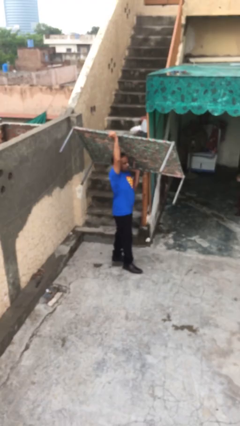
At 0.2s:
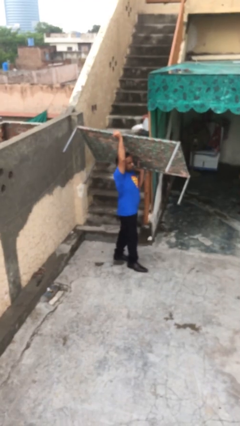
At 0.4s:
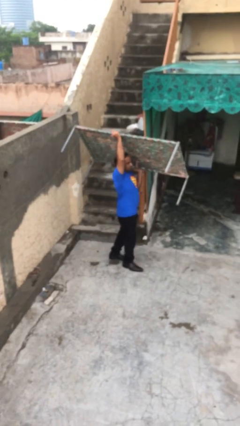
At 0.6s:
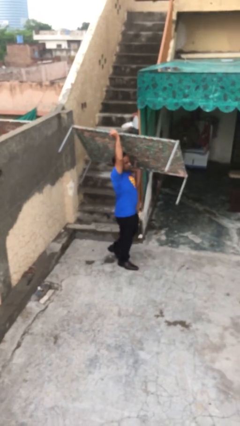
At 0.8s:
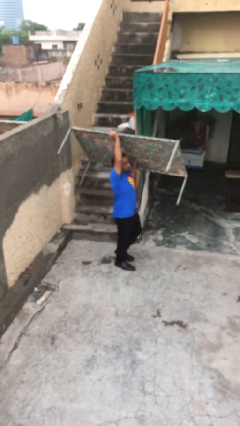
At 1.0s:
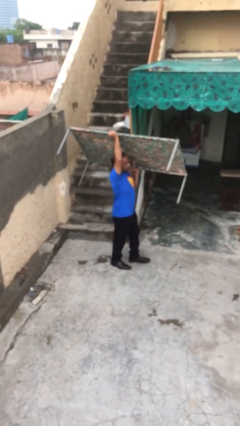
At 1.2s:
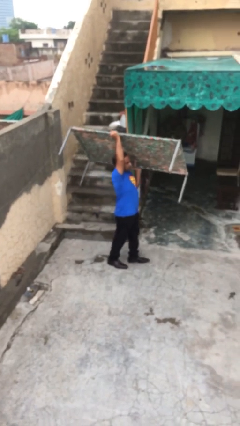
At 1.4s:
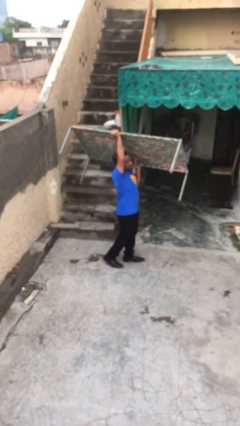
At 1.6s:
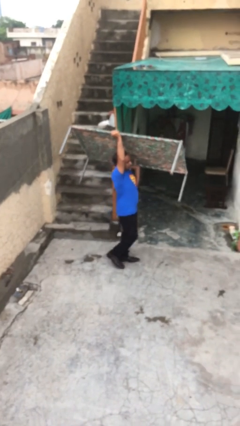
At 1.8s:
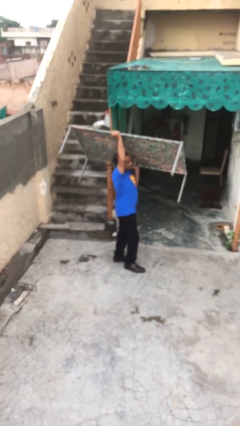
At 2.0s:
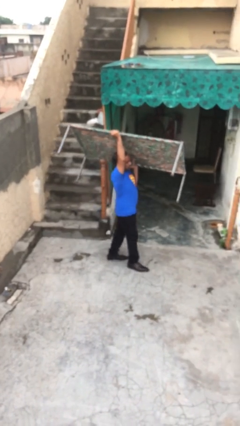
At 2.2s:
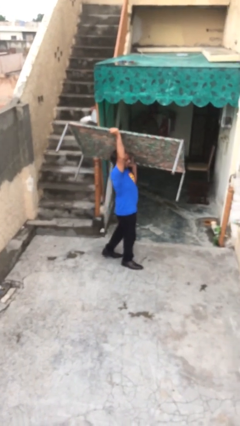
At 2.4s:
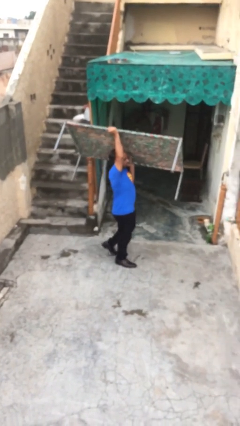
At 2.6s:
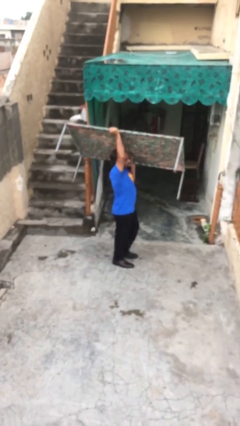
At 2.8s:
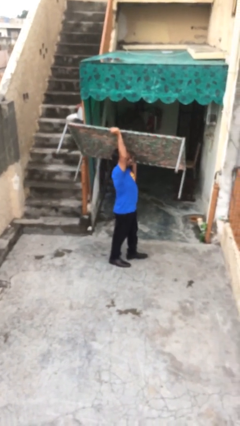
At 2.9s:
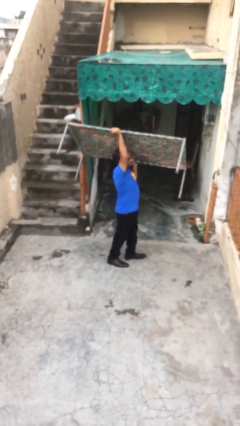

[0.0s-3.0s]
person carries heavy object

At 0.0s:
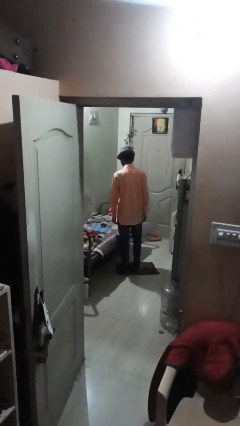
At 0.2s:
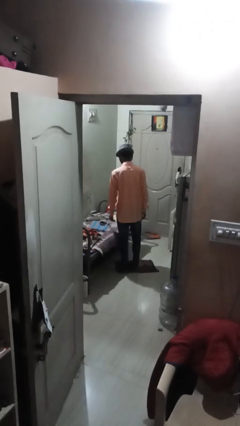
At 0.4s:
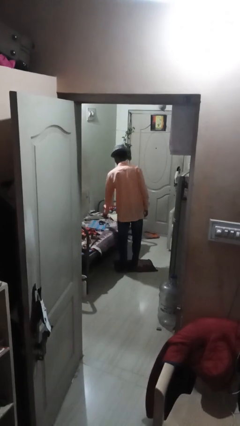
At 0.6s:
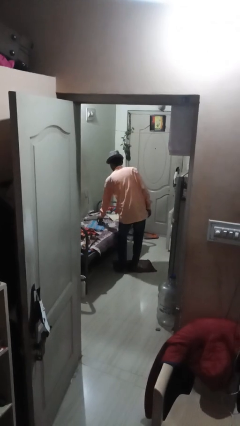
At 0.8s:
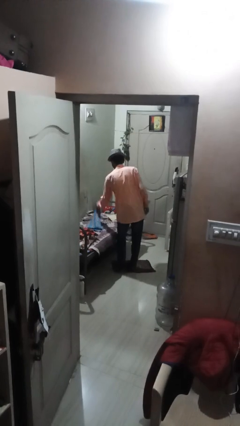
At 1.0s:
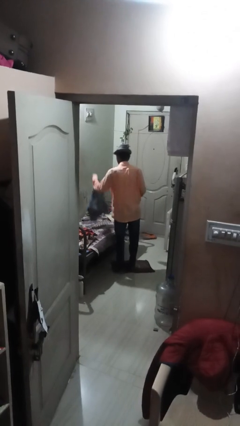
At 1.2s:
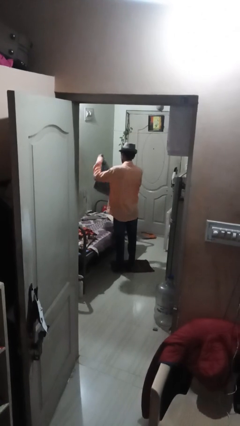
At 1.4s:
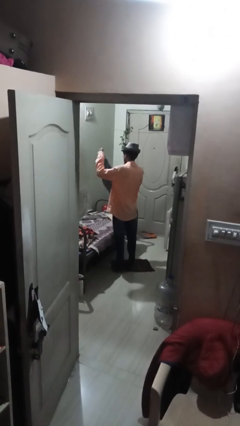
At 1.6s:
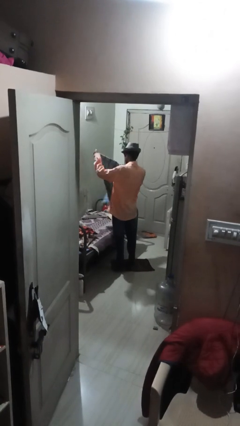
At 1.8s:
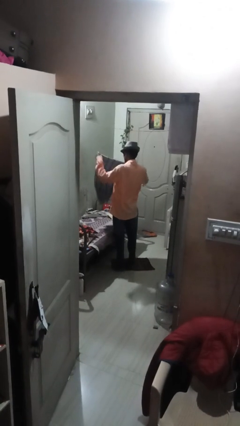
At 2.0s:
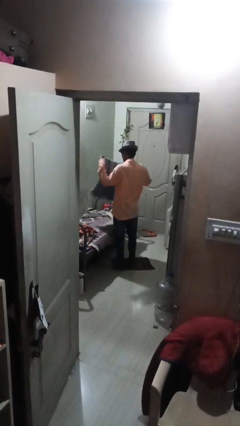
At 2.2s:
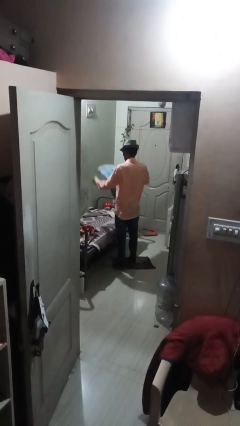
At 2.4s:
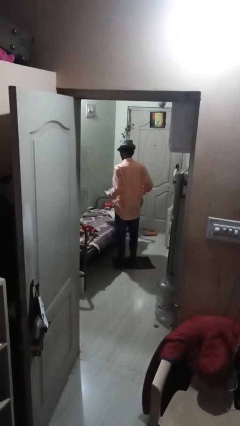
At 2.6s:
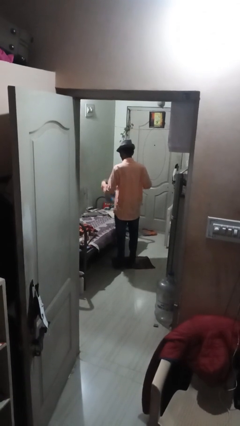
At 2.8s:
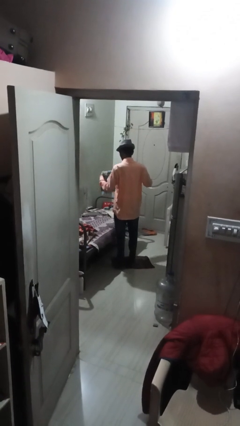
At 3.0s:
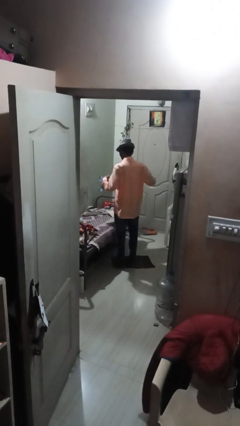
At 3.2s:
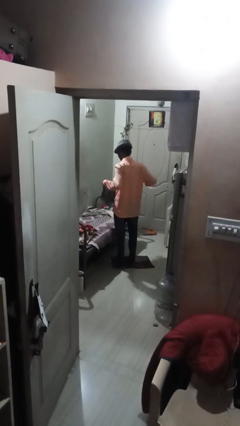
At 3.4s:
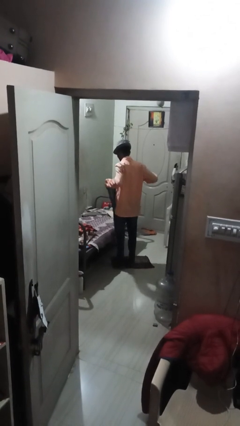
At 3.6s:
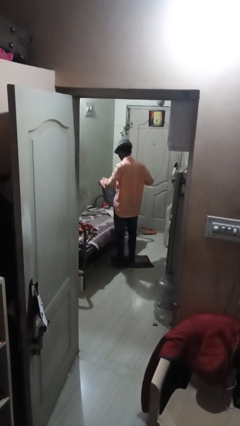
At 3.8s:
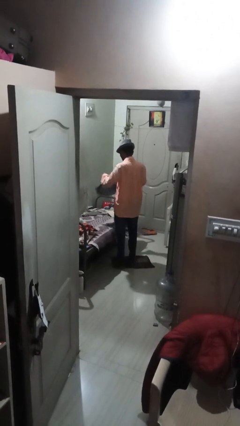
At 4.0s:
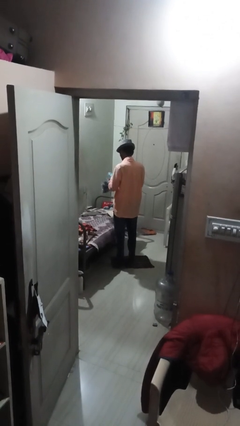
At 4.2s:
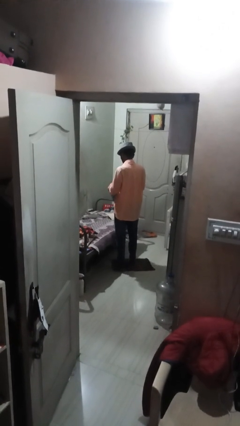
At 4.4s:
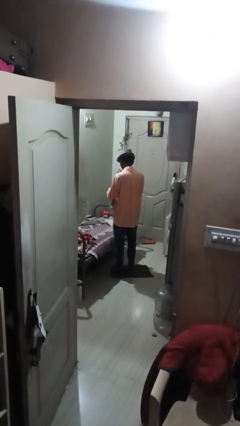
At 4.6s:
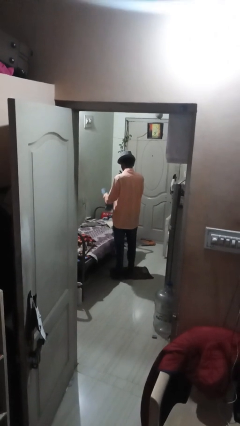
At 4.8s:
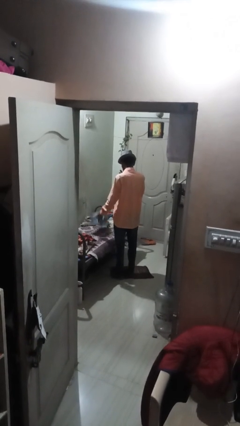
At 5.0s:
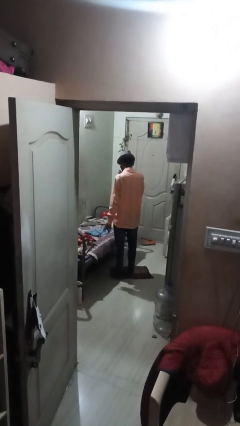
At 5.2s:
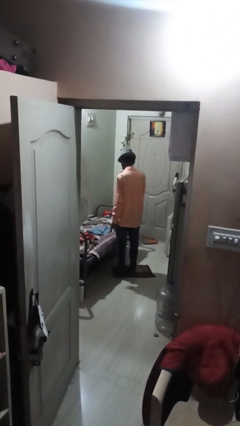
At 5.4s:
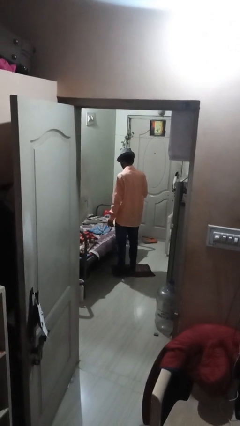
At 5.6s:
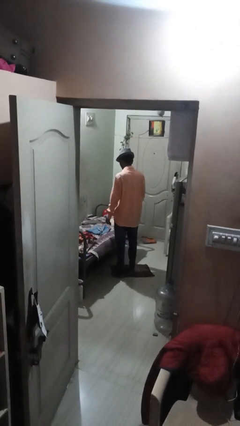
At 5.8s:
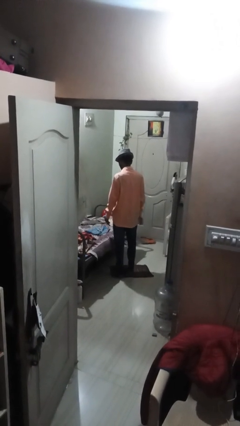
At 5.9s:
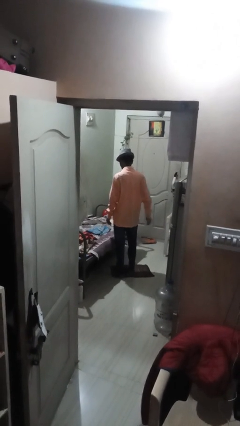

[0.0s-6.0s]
person folds towel

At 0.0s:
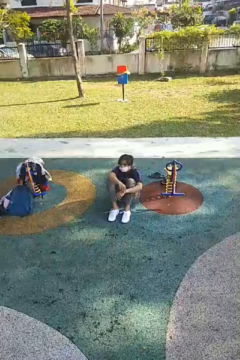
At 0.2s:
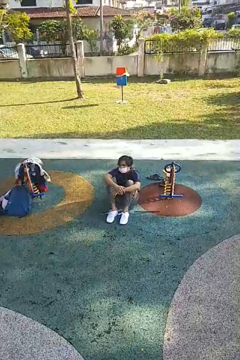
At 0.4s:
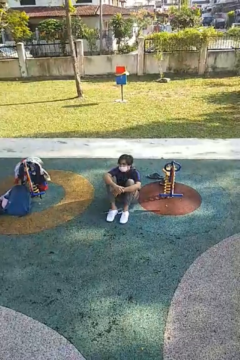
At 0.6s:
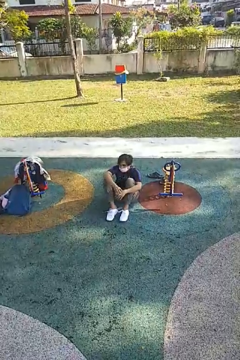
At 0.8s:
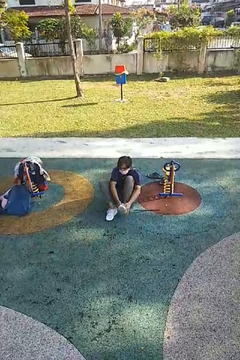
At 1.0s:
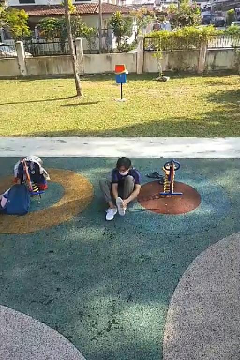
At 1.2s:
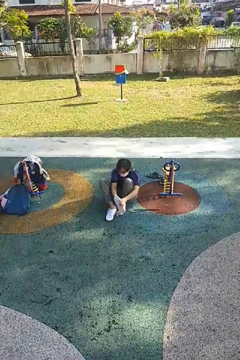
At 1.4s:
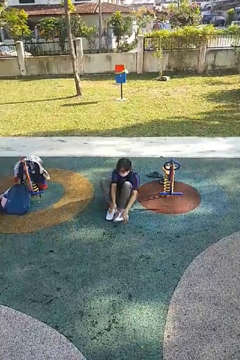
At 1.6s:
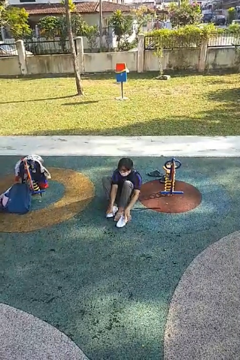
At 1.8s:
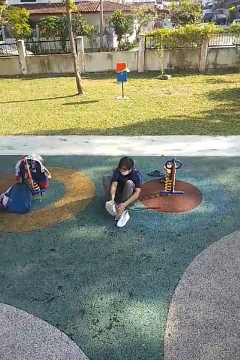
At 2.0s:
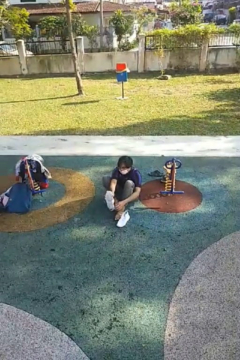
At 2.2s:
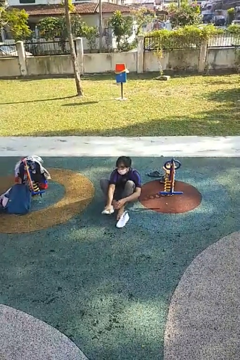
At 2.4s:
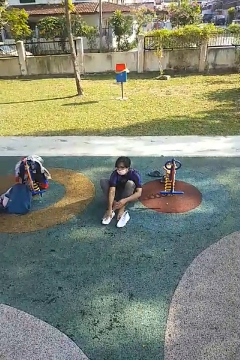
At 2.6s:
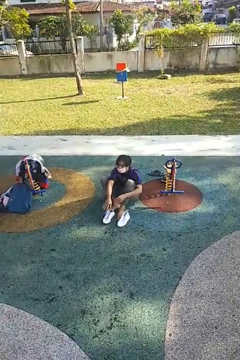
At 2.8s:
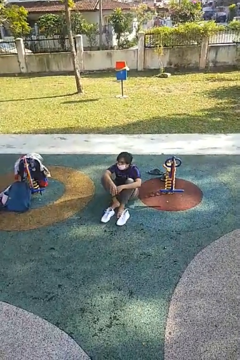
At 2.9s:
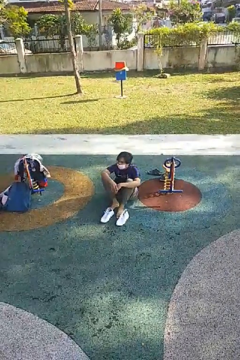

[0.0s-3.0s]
person takes off shoes

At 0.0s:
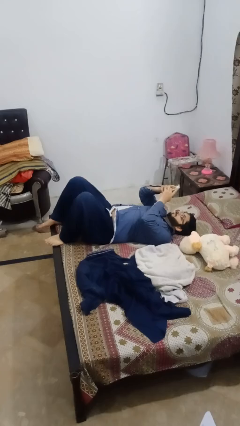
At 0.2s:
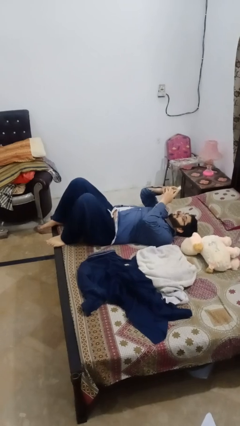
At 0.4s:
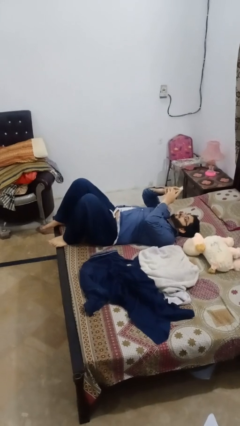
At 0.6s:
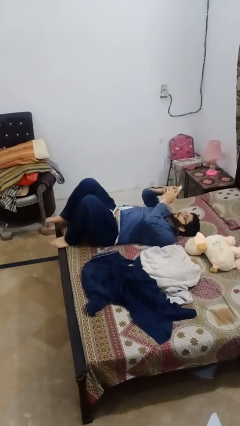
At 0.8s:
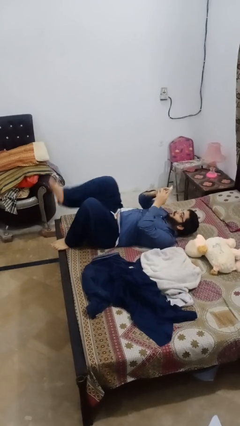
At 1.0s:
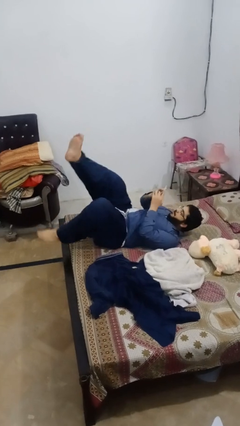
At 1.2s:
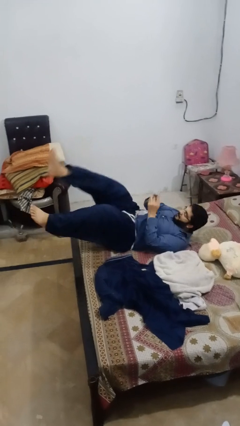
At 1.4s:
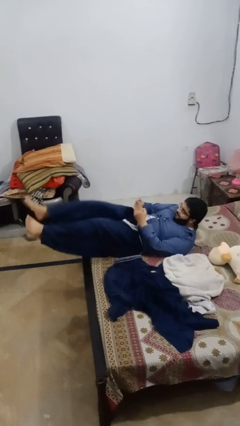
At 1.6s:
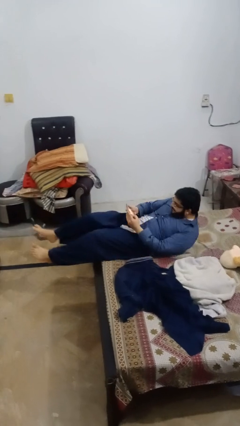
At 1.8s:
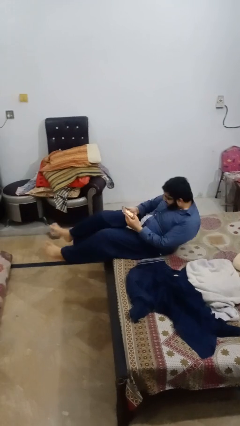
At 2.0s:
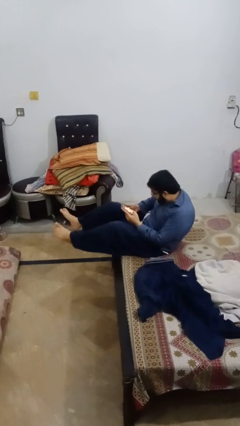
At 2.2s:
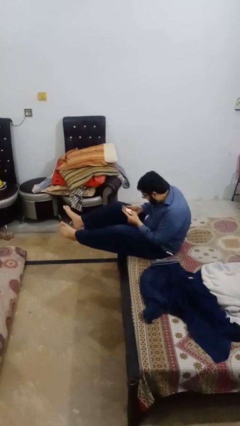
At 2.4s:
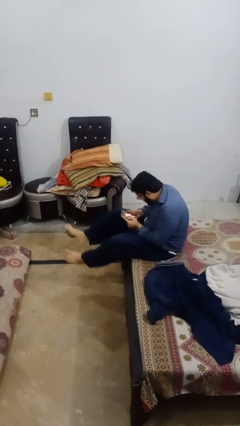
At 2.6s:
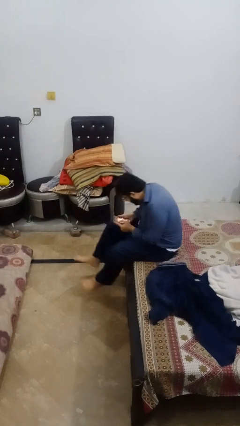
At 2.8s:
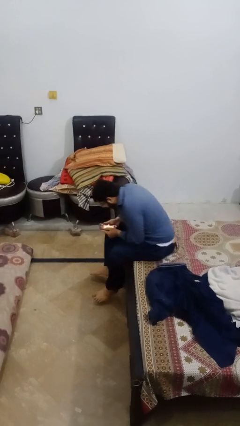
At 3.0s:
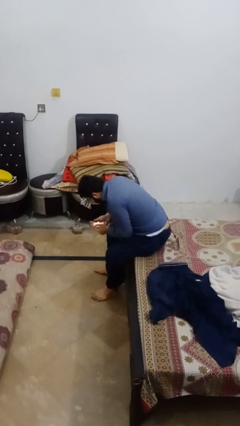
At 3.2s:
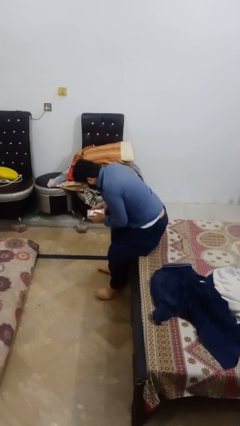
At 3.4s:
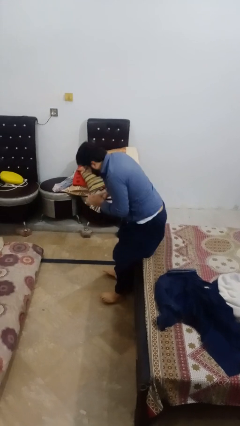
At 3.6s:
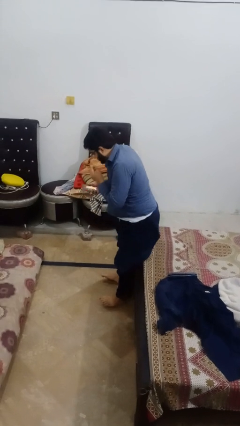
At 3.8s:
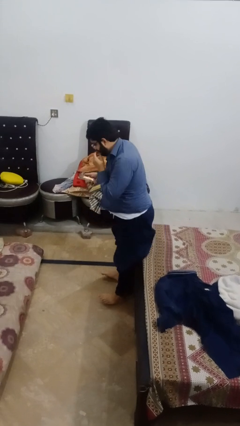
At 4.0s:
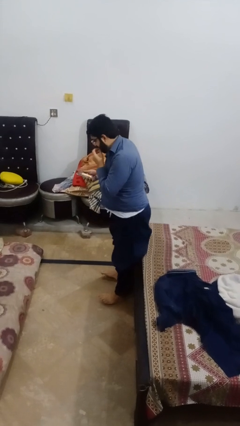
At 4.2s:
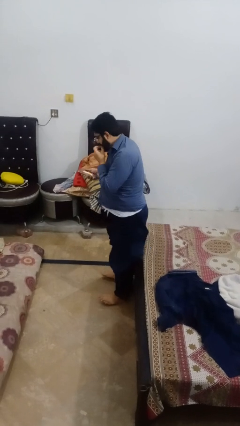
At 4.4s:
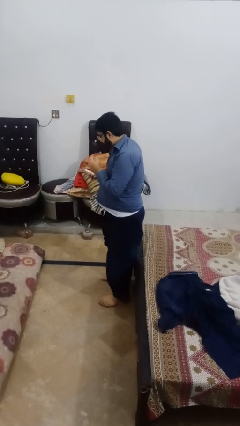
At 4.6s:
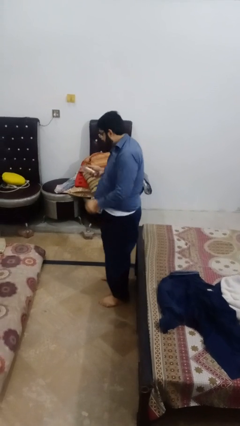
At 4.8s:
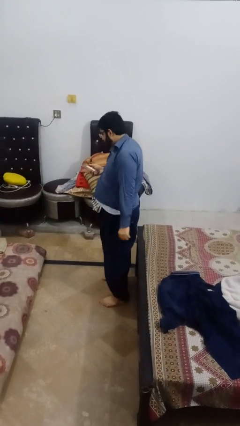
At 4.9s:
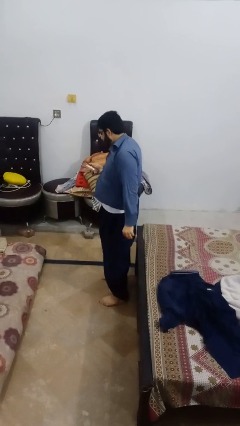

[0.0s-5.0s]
person stands up

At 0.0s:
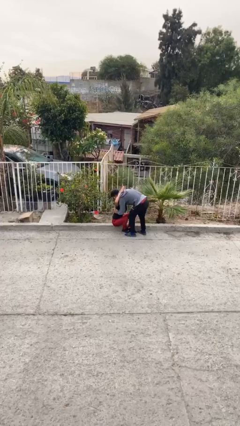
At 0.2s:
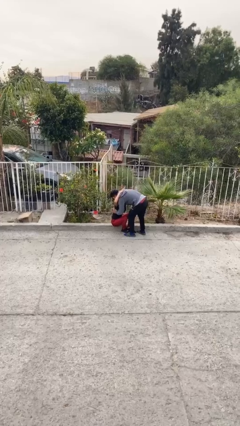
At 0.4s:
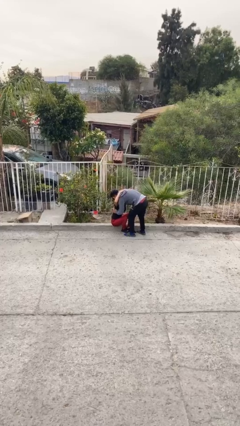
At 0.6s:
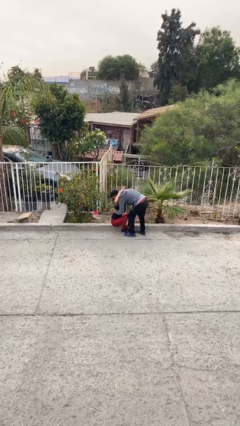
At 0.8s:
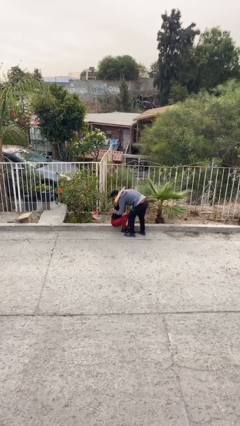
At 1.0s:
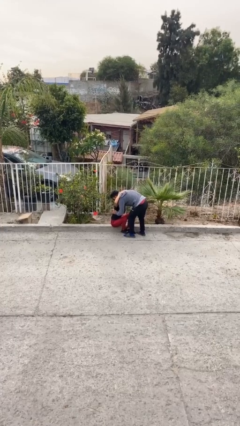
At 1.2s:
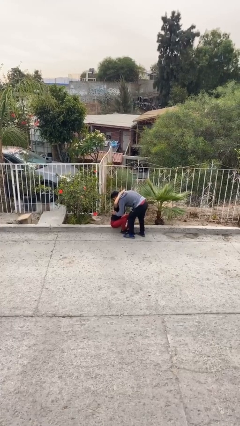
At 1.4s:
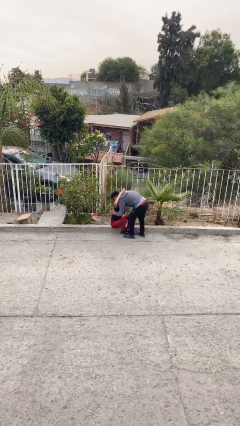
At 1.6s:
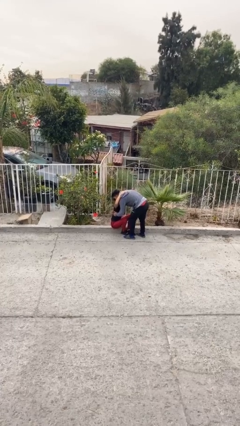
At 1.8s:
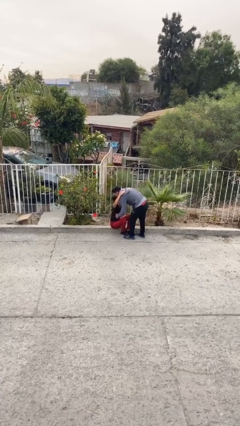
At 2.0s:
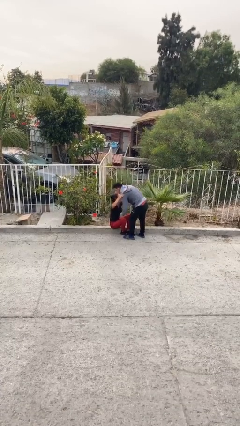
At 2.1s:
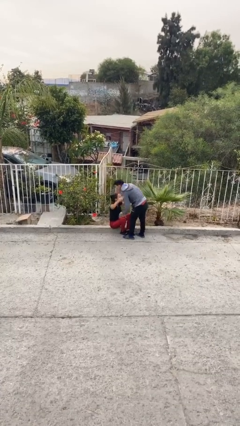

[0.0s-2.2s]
person embraces person
